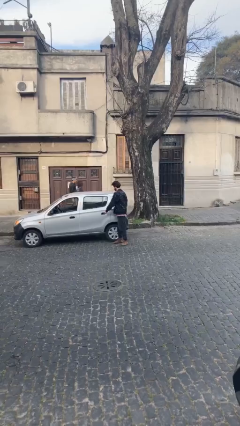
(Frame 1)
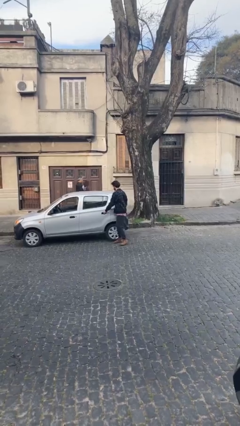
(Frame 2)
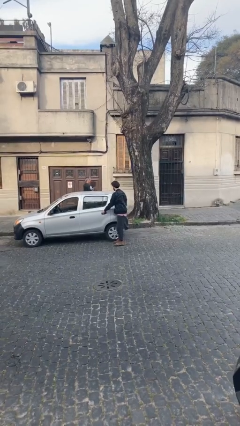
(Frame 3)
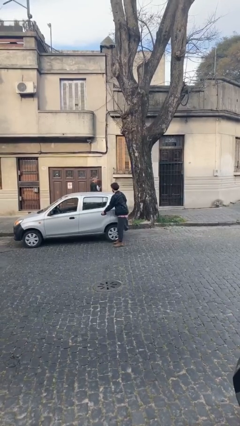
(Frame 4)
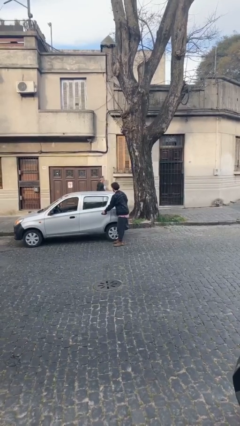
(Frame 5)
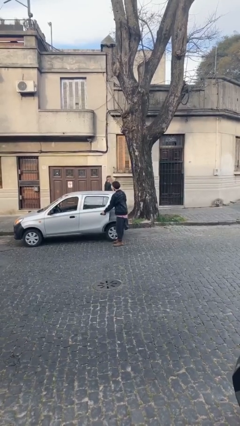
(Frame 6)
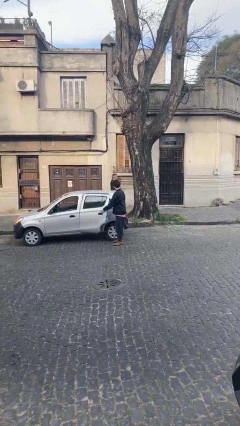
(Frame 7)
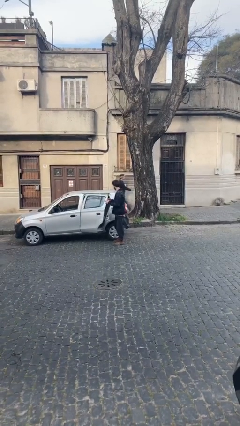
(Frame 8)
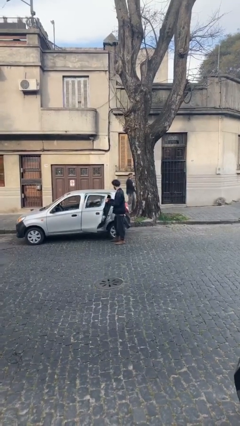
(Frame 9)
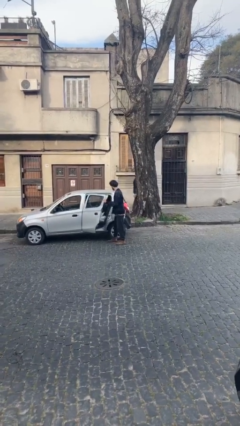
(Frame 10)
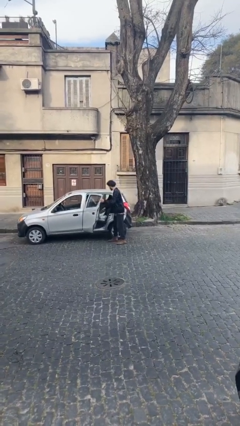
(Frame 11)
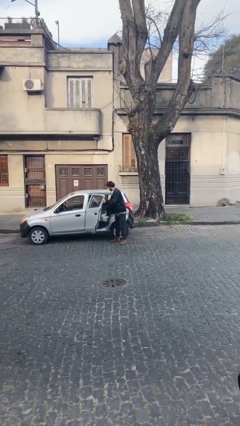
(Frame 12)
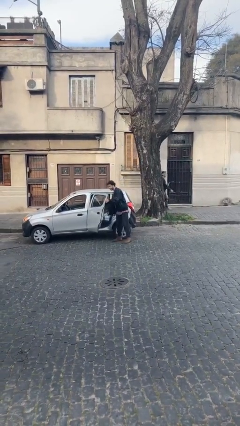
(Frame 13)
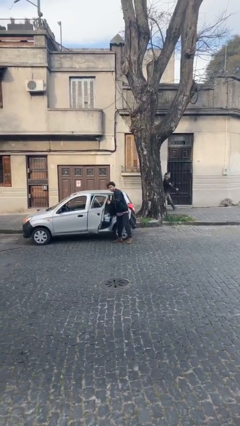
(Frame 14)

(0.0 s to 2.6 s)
person opens car door

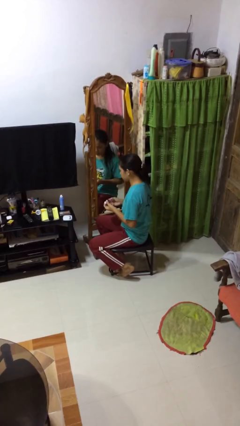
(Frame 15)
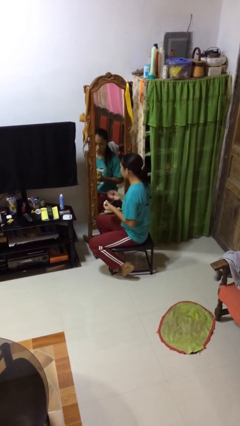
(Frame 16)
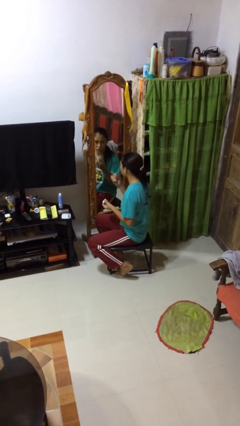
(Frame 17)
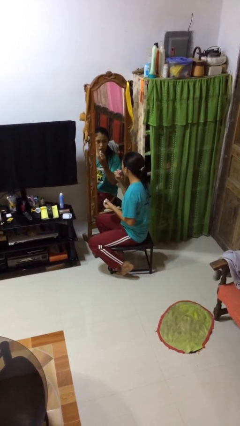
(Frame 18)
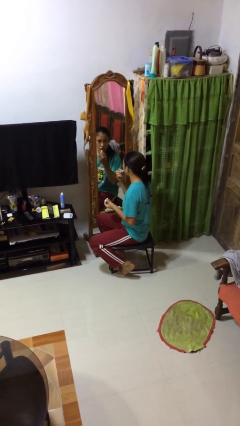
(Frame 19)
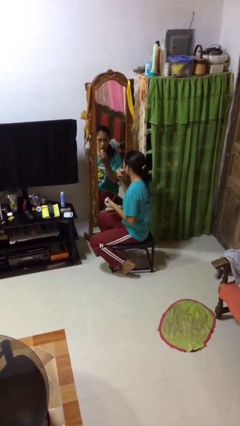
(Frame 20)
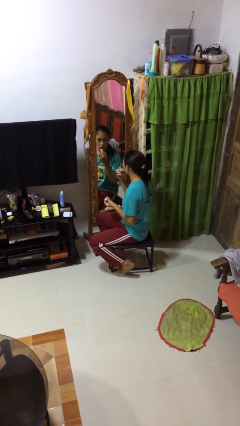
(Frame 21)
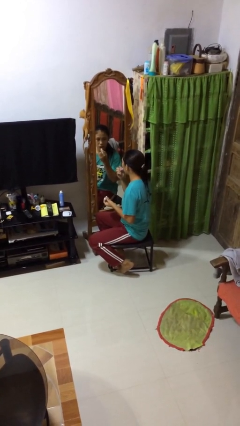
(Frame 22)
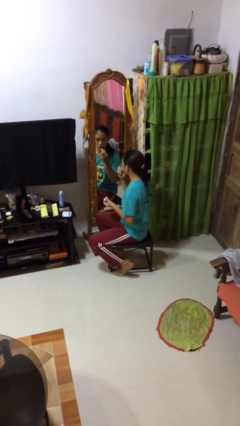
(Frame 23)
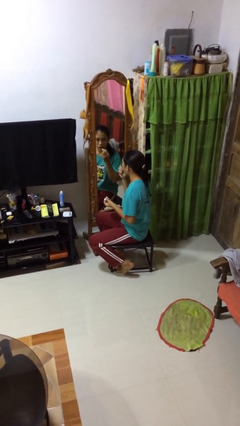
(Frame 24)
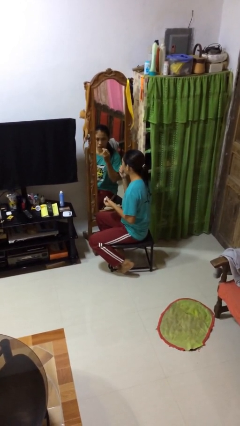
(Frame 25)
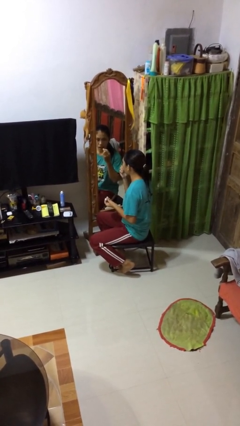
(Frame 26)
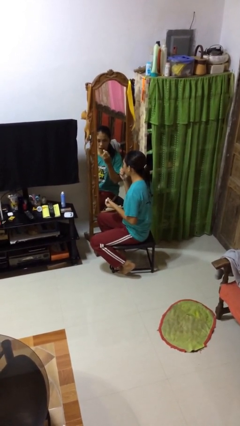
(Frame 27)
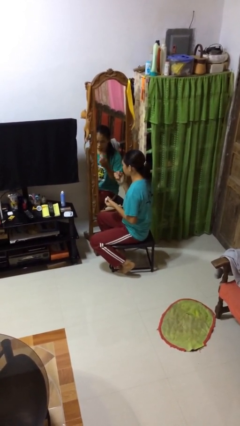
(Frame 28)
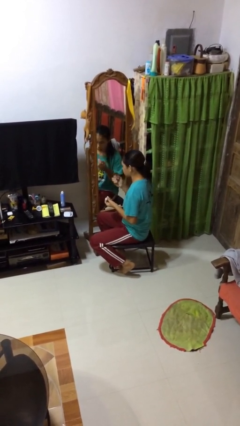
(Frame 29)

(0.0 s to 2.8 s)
person applies lip makeup

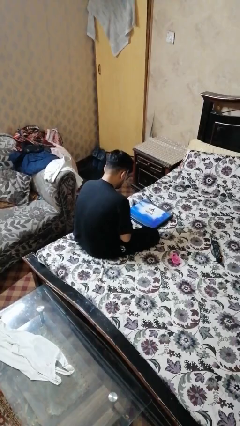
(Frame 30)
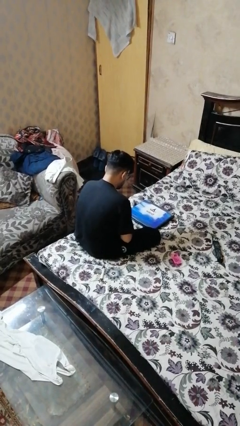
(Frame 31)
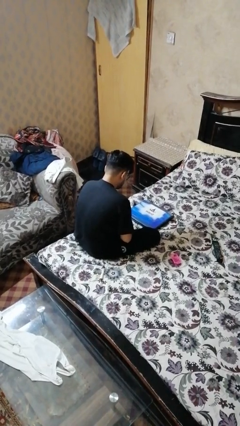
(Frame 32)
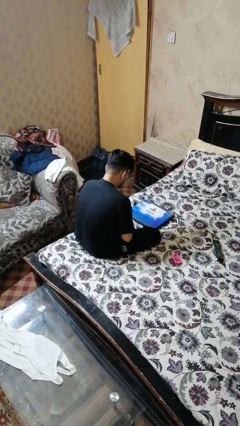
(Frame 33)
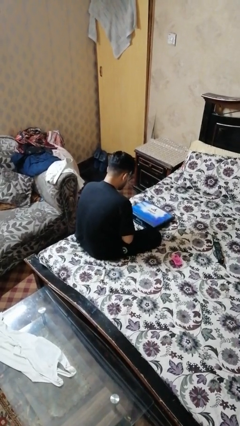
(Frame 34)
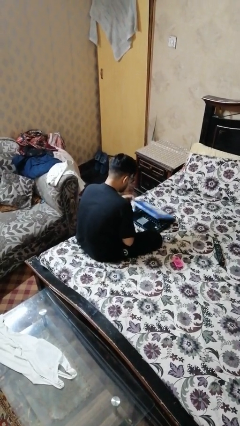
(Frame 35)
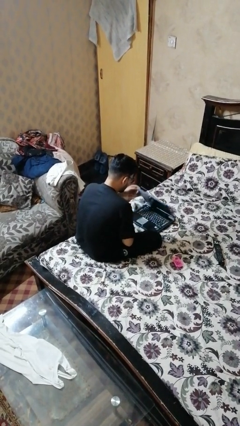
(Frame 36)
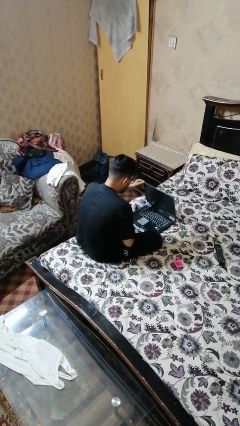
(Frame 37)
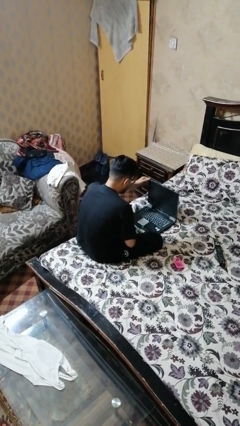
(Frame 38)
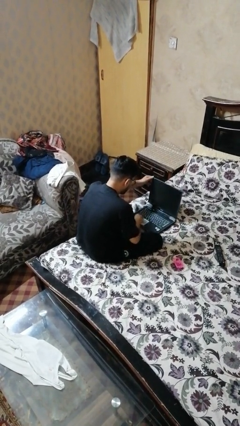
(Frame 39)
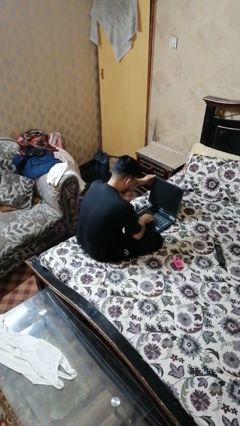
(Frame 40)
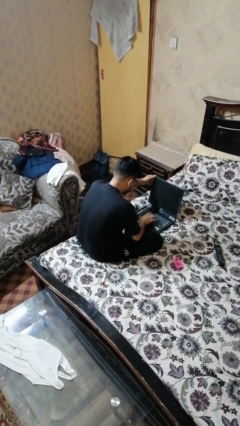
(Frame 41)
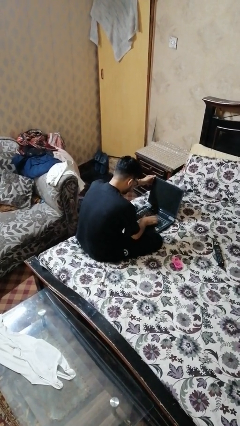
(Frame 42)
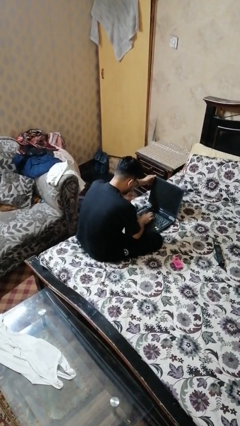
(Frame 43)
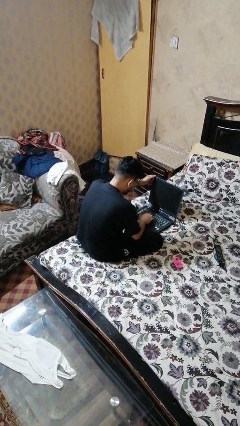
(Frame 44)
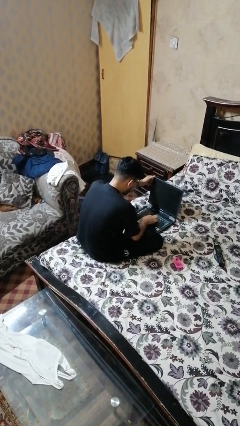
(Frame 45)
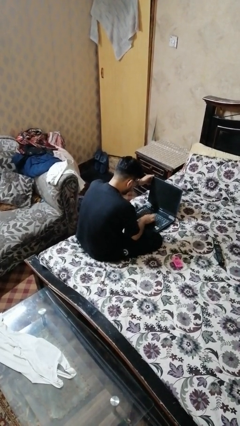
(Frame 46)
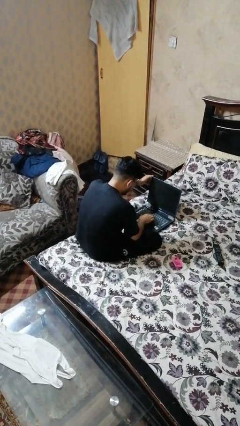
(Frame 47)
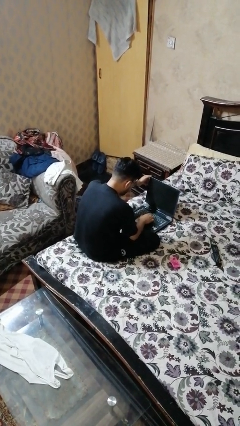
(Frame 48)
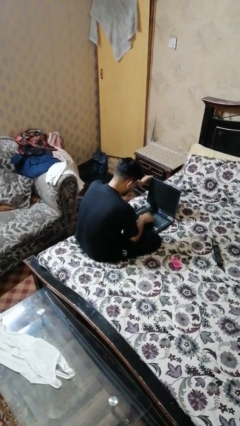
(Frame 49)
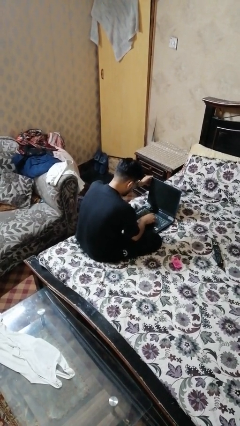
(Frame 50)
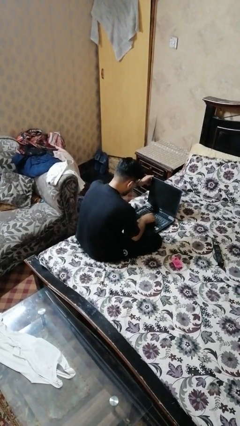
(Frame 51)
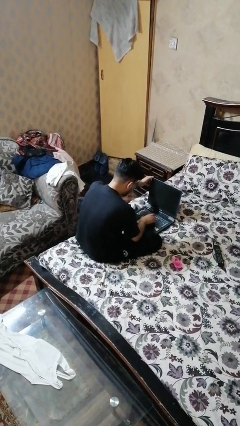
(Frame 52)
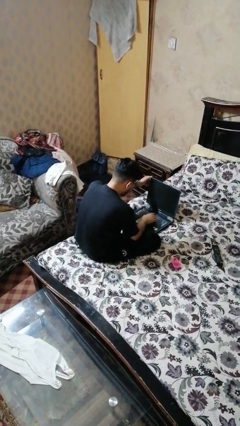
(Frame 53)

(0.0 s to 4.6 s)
person opens laptop

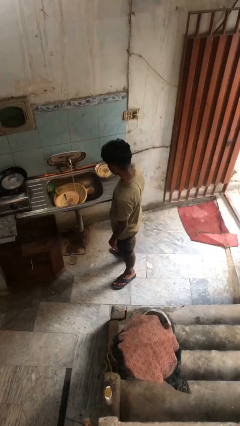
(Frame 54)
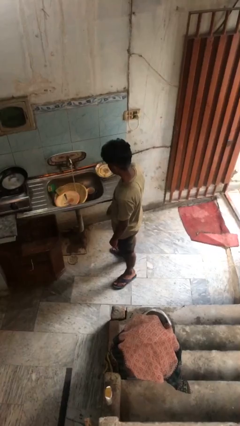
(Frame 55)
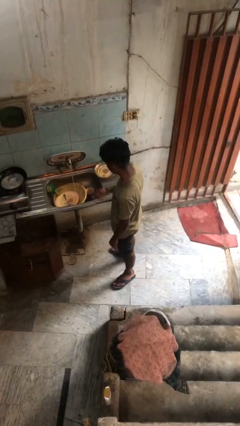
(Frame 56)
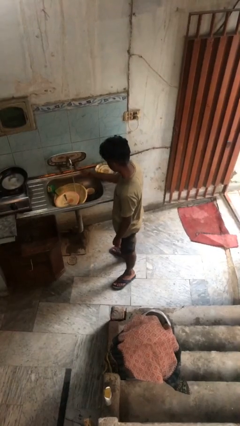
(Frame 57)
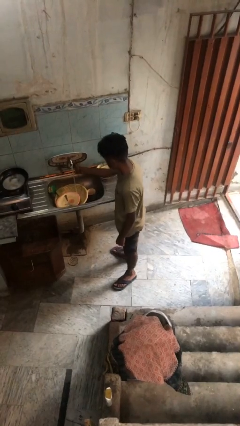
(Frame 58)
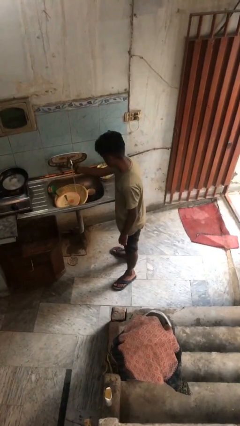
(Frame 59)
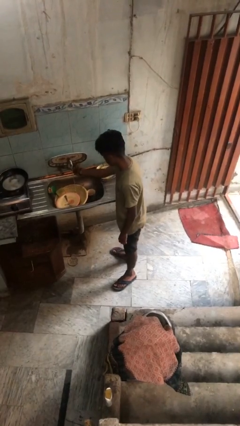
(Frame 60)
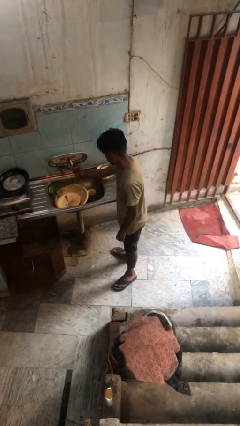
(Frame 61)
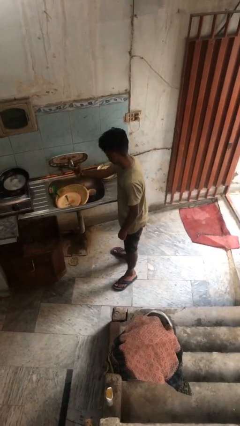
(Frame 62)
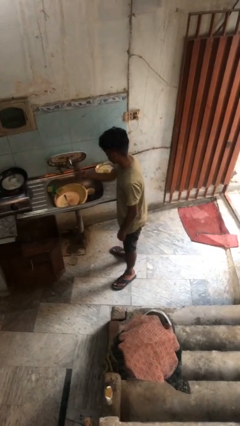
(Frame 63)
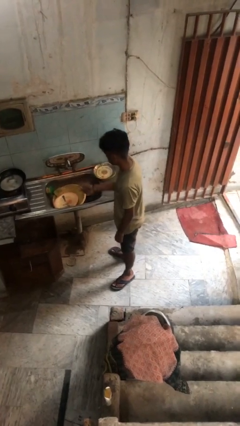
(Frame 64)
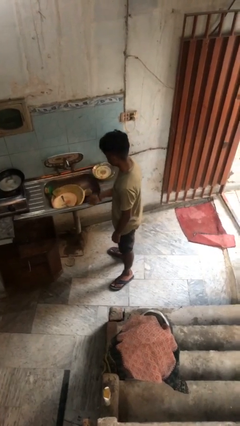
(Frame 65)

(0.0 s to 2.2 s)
person turns off faucet

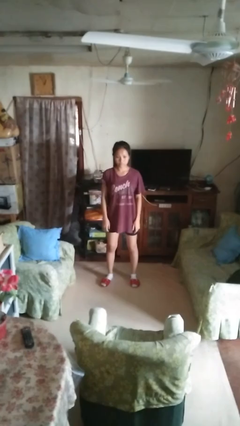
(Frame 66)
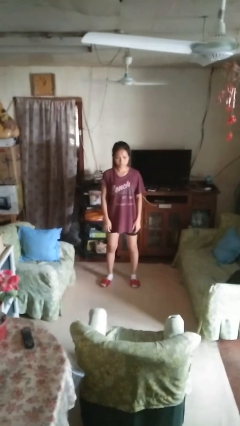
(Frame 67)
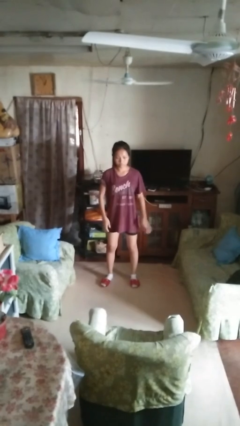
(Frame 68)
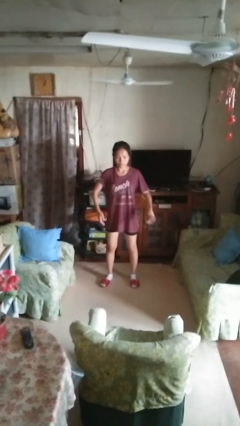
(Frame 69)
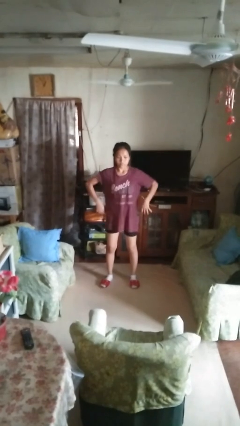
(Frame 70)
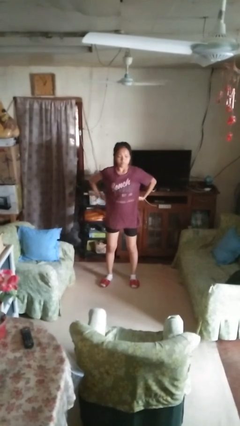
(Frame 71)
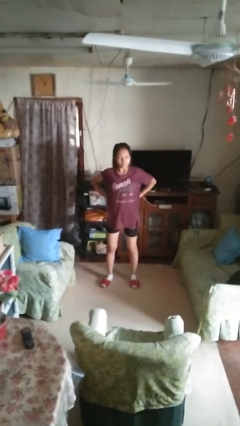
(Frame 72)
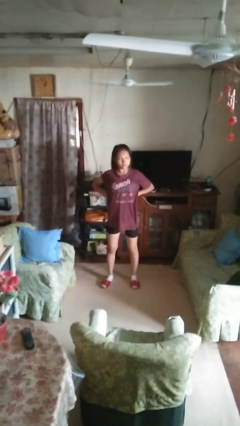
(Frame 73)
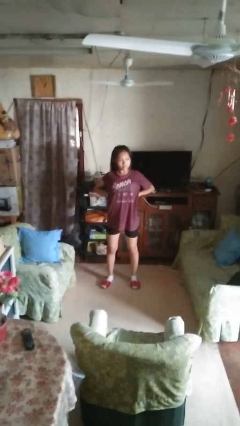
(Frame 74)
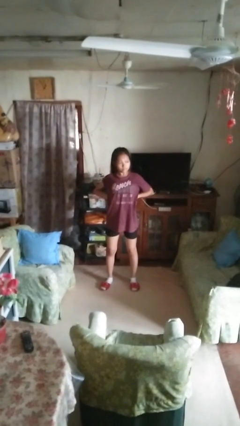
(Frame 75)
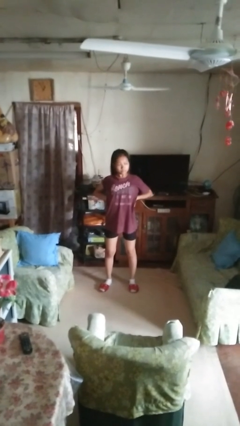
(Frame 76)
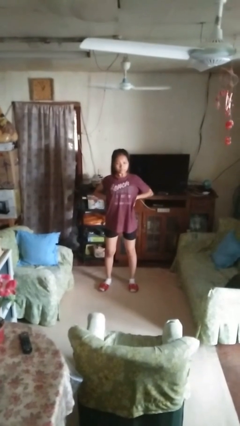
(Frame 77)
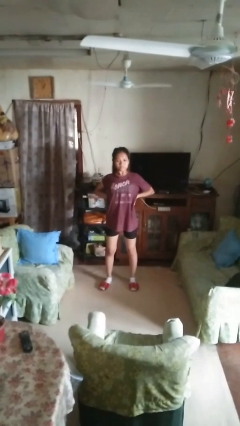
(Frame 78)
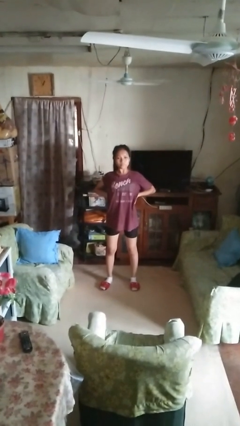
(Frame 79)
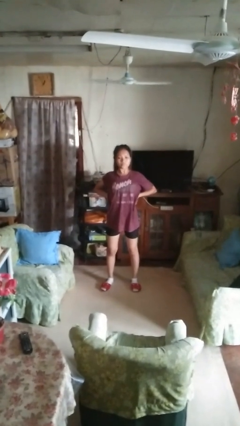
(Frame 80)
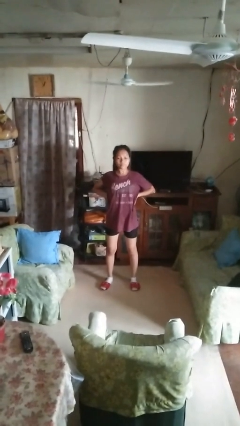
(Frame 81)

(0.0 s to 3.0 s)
person stretches back

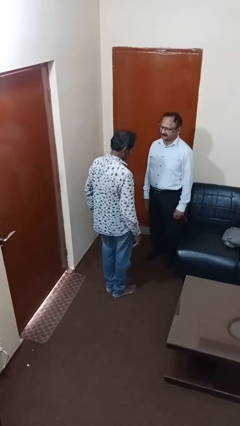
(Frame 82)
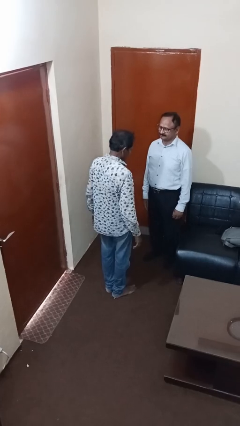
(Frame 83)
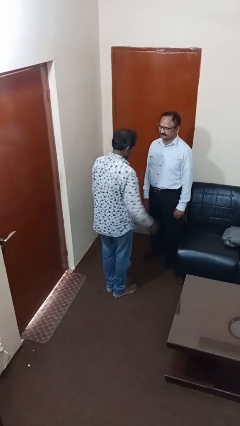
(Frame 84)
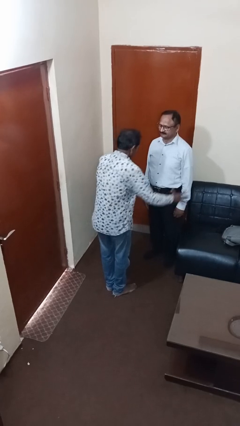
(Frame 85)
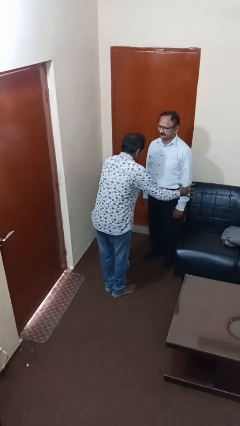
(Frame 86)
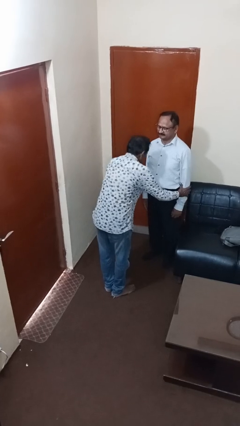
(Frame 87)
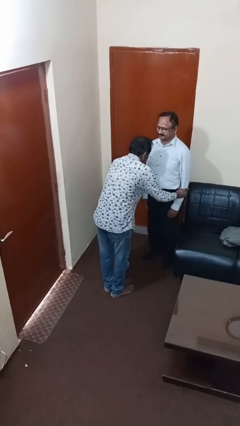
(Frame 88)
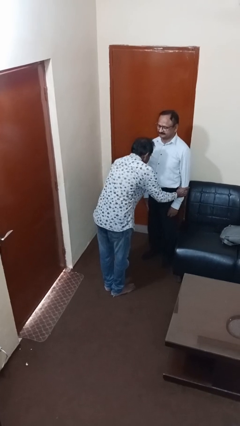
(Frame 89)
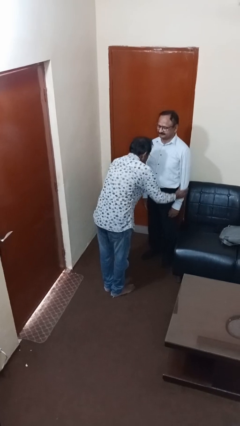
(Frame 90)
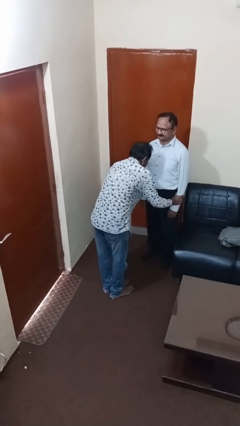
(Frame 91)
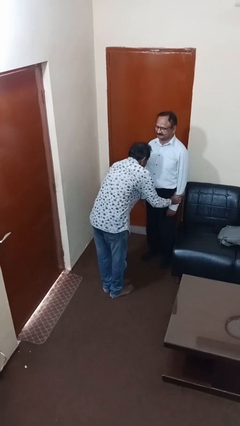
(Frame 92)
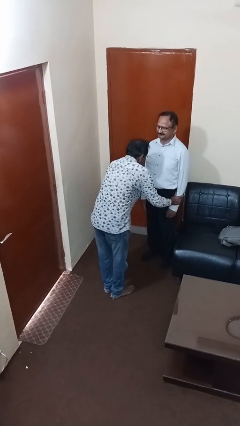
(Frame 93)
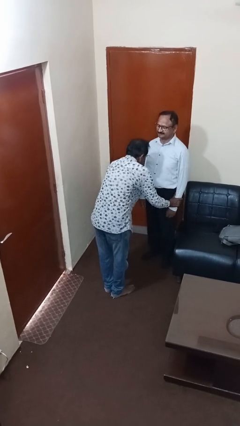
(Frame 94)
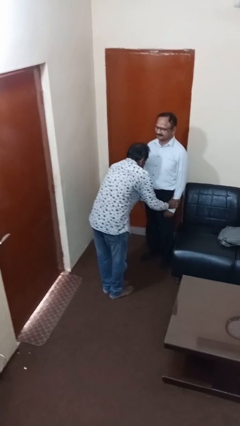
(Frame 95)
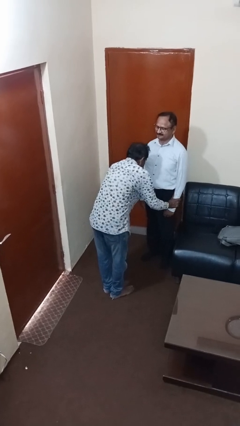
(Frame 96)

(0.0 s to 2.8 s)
person grabs person by forearm
